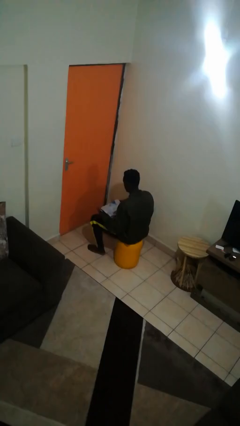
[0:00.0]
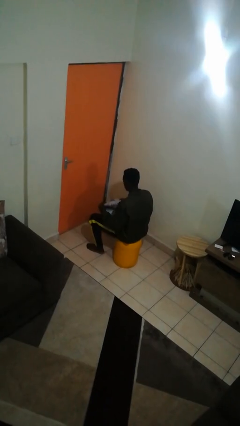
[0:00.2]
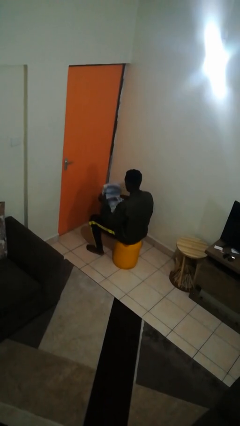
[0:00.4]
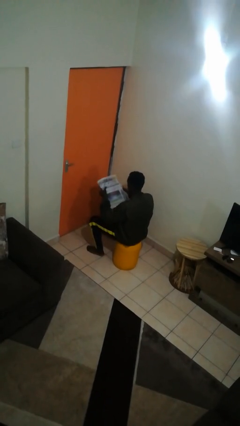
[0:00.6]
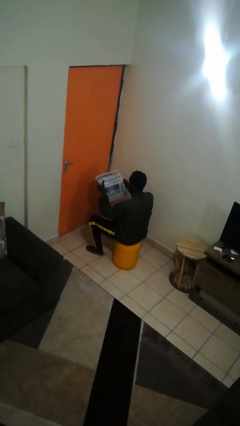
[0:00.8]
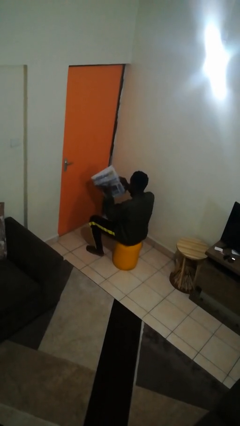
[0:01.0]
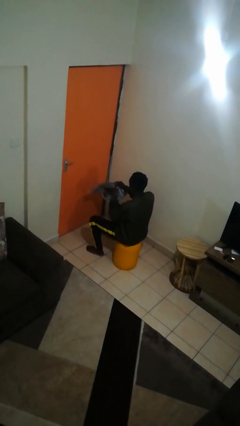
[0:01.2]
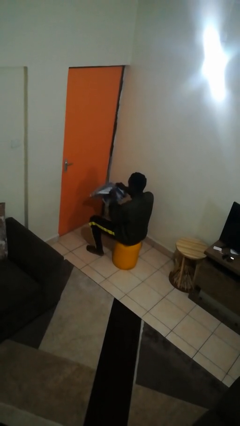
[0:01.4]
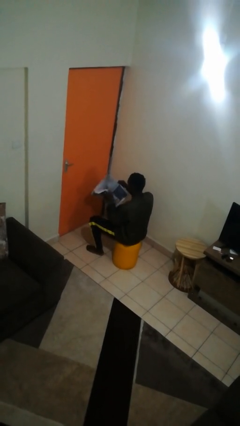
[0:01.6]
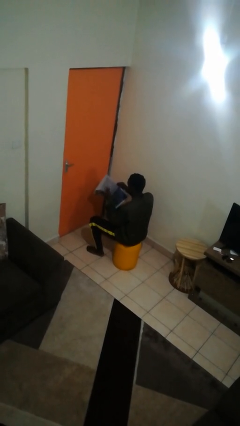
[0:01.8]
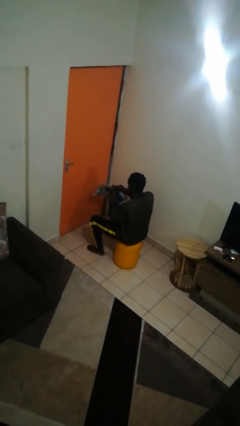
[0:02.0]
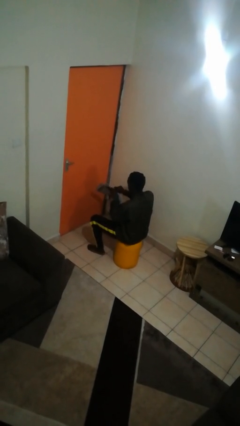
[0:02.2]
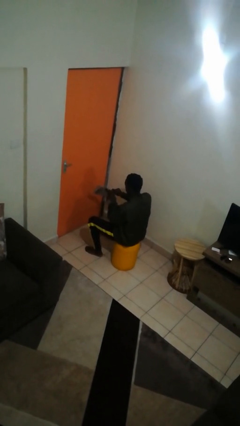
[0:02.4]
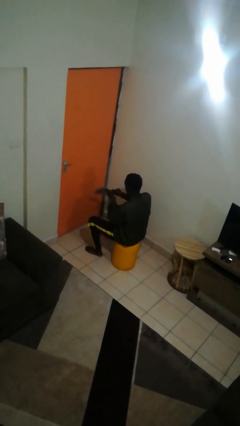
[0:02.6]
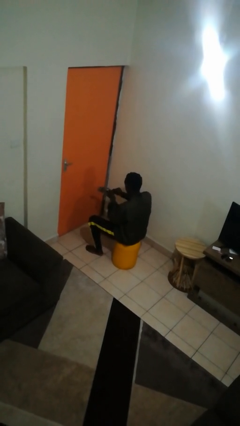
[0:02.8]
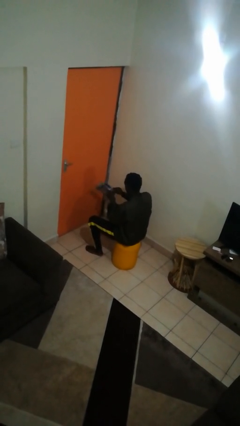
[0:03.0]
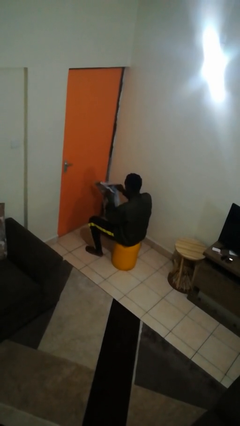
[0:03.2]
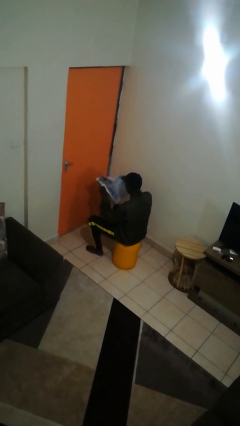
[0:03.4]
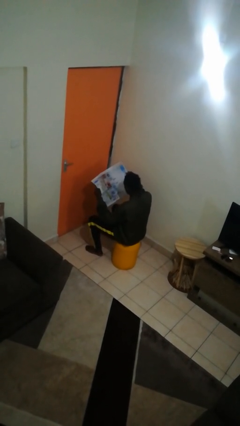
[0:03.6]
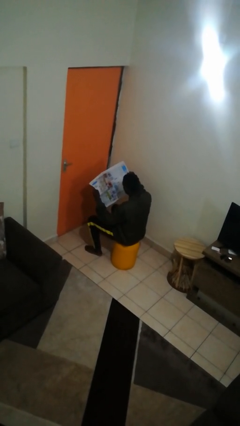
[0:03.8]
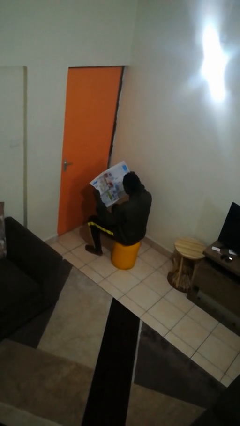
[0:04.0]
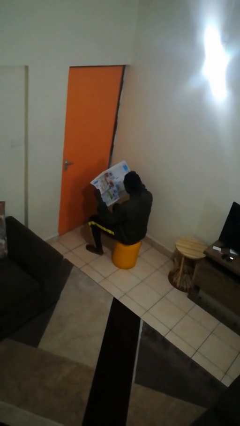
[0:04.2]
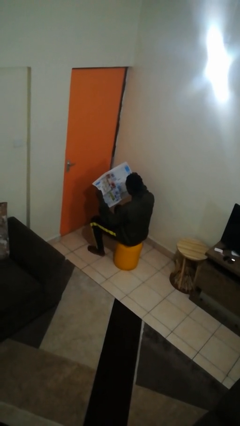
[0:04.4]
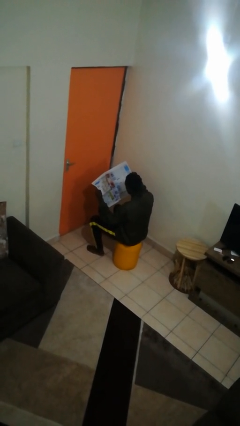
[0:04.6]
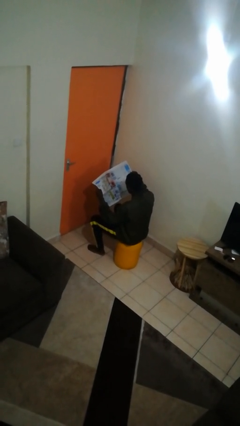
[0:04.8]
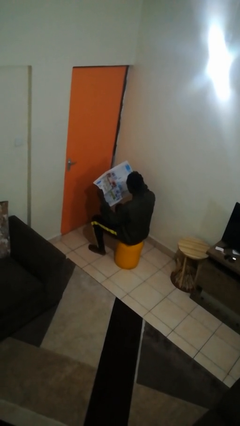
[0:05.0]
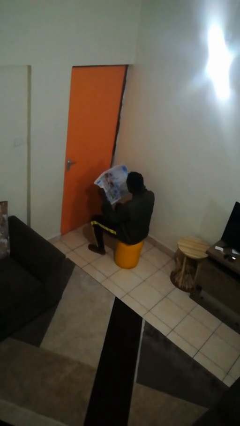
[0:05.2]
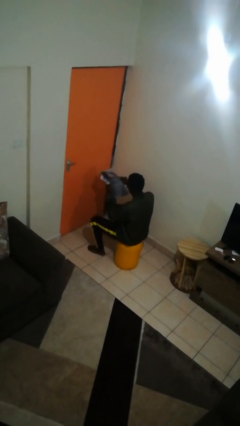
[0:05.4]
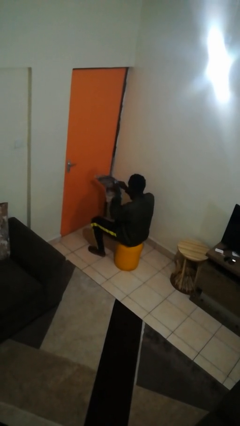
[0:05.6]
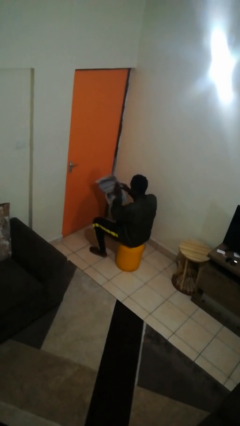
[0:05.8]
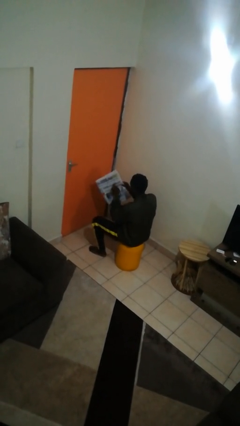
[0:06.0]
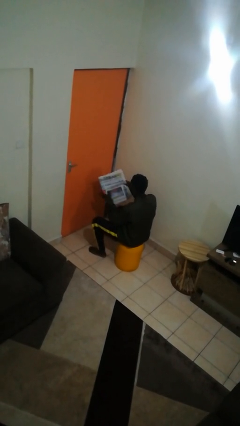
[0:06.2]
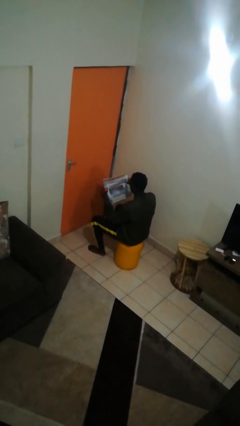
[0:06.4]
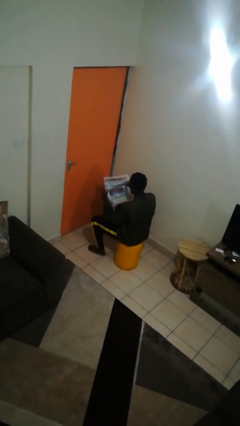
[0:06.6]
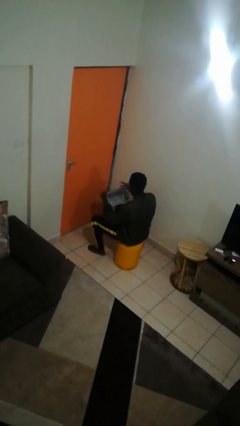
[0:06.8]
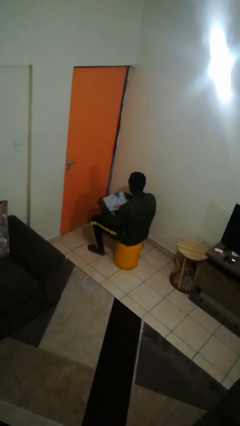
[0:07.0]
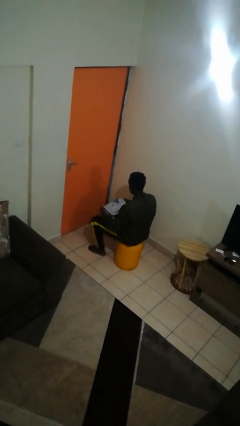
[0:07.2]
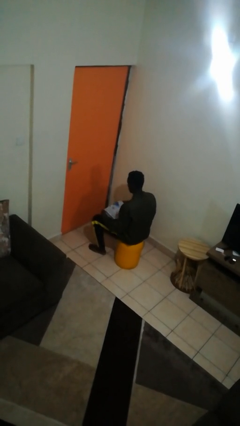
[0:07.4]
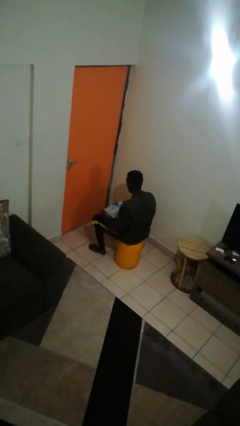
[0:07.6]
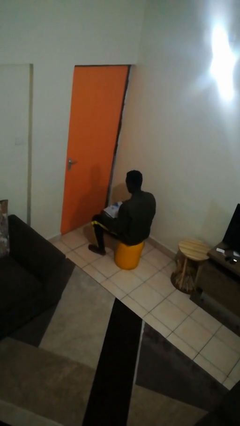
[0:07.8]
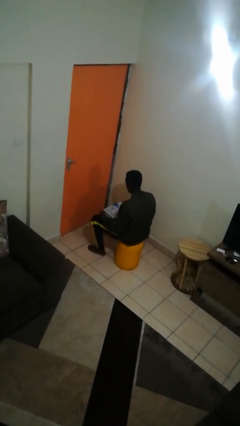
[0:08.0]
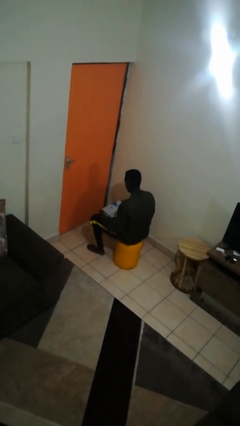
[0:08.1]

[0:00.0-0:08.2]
person reads newspaper

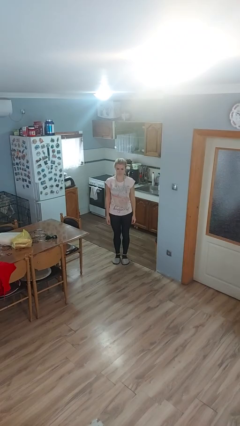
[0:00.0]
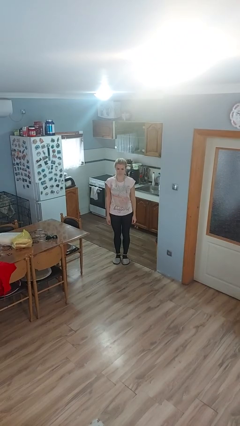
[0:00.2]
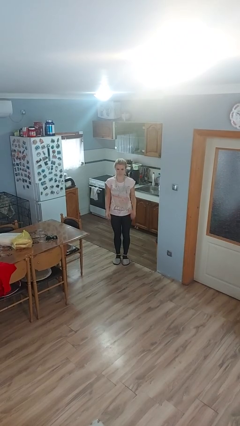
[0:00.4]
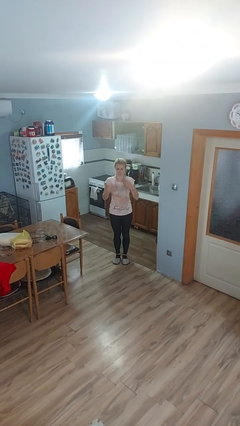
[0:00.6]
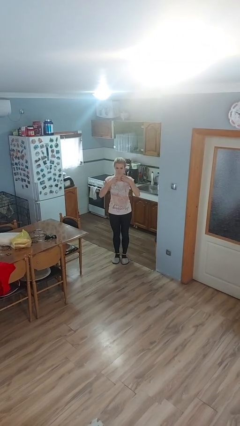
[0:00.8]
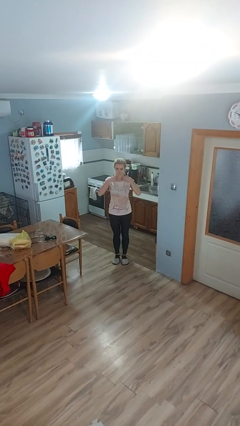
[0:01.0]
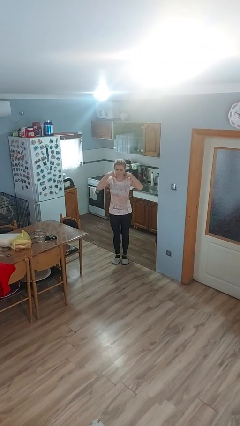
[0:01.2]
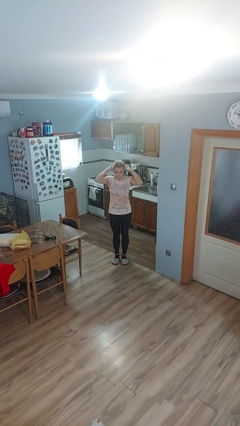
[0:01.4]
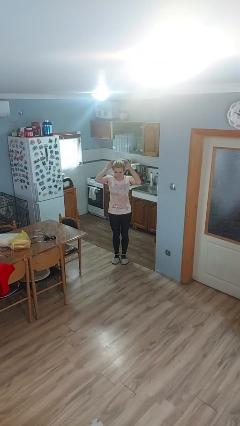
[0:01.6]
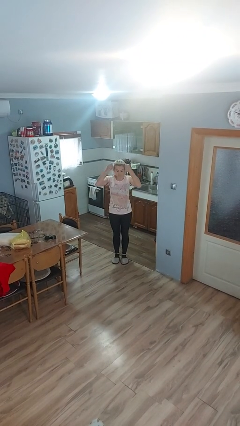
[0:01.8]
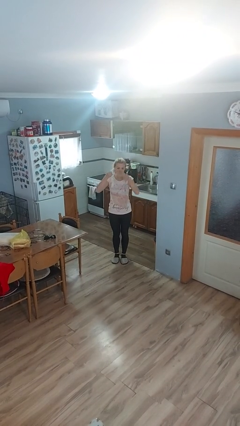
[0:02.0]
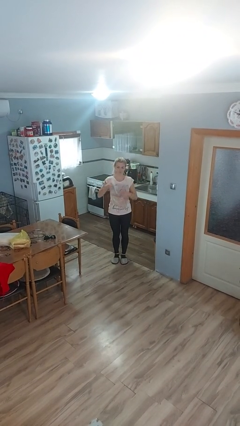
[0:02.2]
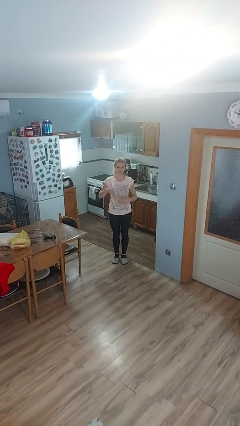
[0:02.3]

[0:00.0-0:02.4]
person takes off necklace

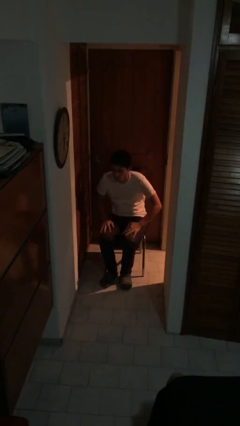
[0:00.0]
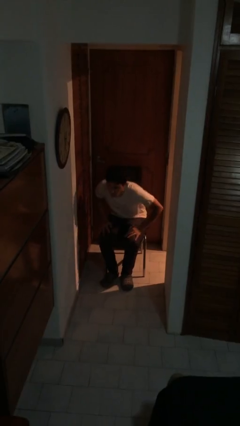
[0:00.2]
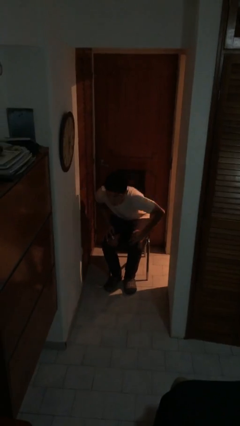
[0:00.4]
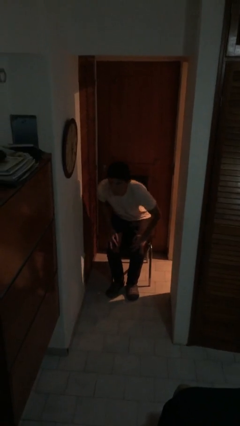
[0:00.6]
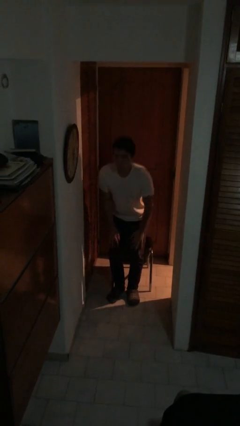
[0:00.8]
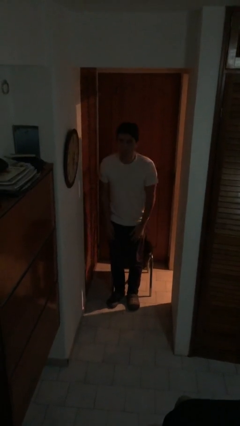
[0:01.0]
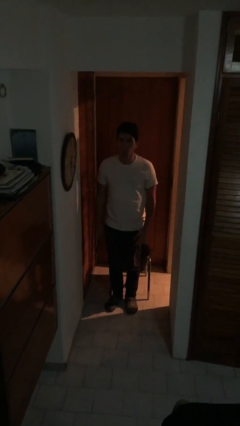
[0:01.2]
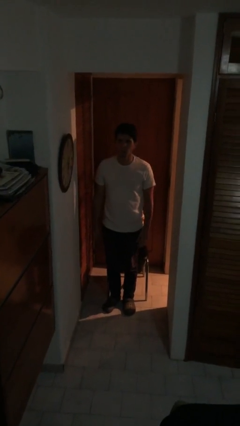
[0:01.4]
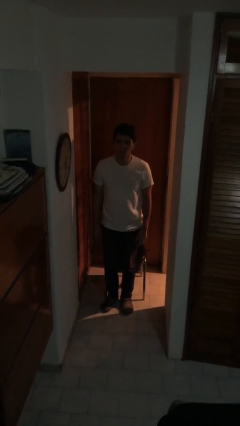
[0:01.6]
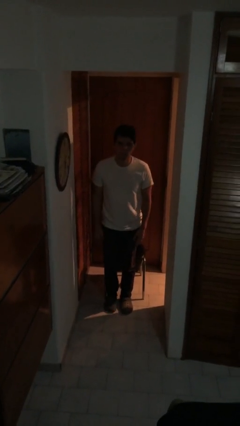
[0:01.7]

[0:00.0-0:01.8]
person stands up

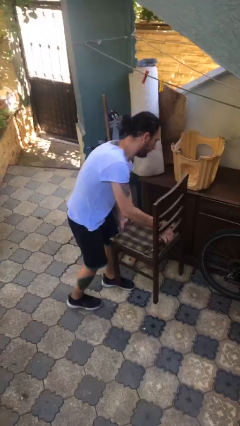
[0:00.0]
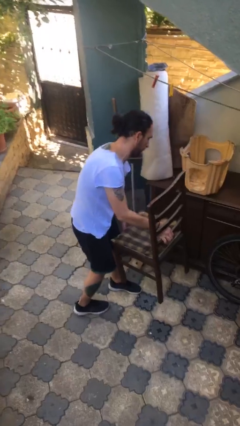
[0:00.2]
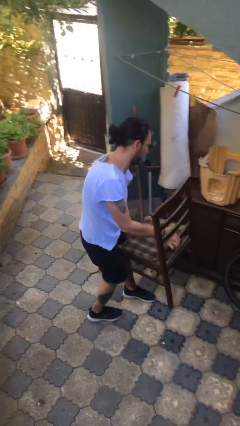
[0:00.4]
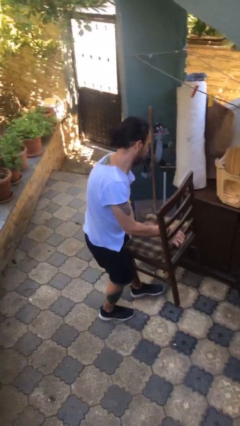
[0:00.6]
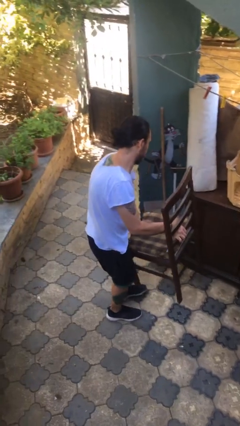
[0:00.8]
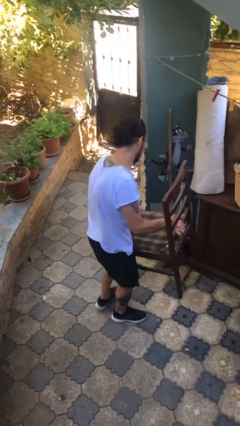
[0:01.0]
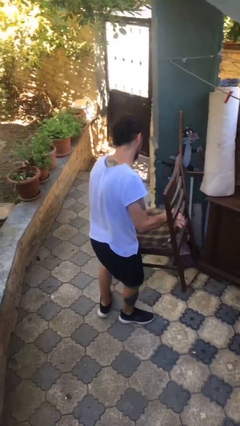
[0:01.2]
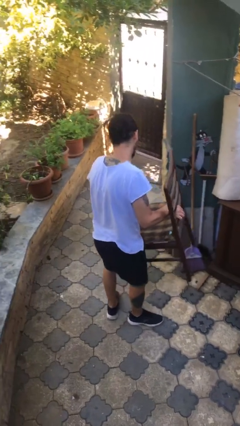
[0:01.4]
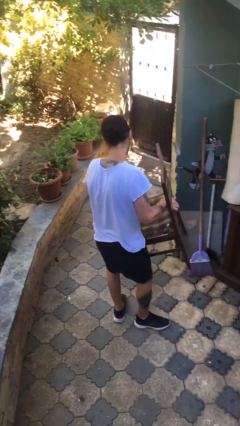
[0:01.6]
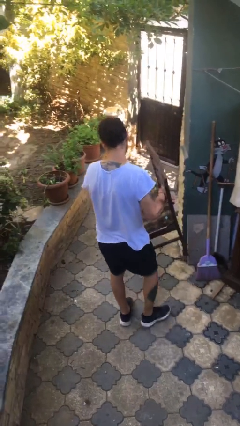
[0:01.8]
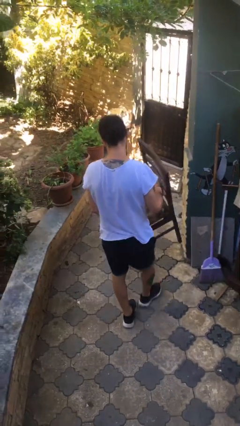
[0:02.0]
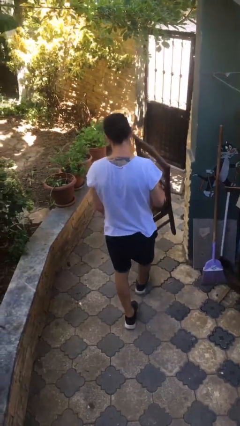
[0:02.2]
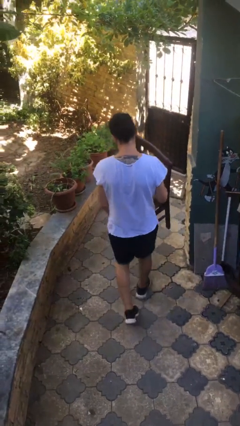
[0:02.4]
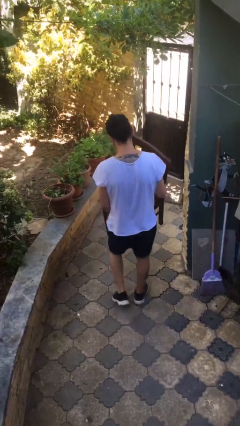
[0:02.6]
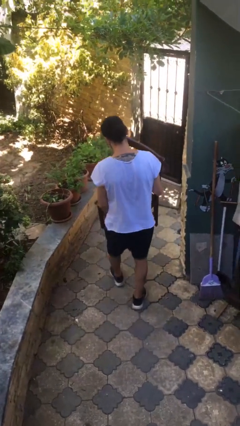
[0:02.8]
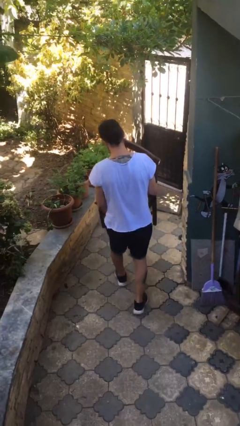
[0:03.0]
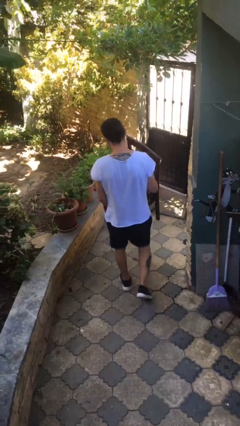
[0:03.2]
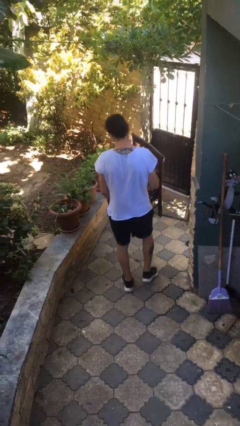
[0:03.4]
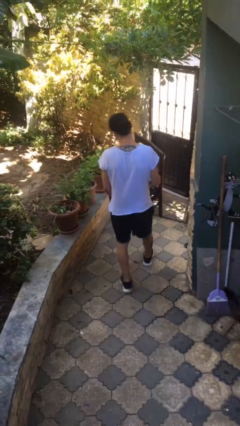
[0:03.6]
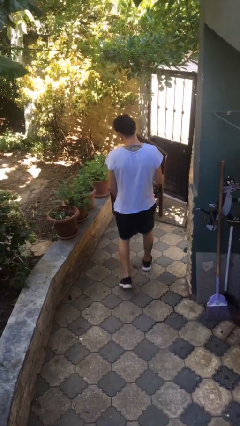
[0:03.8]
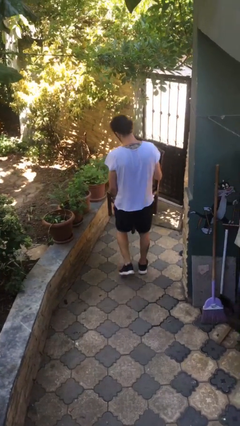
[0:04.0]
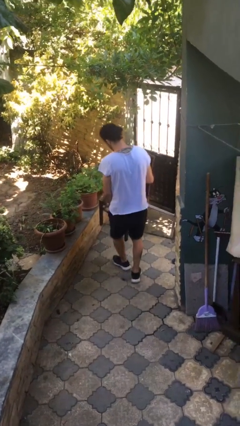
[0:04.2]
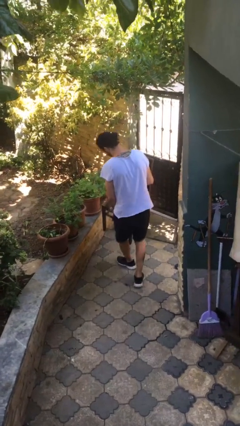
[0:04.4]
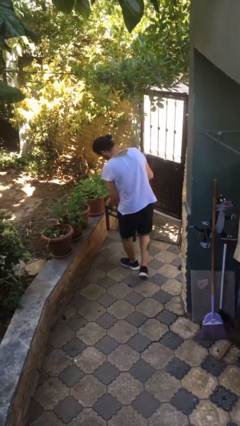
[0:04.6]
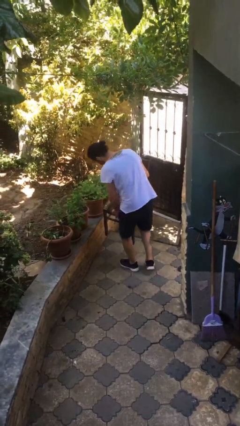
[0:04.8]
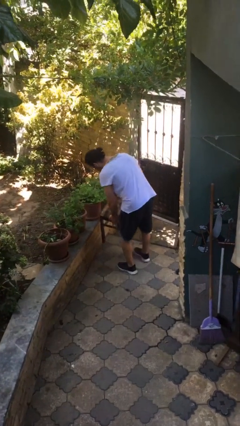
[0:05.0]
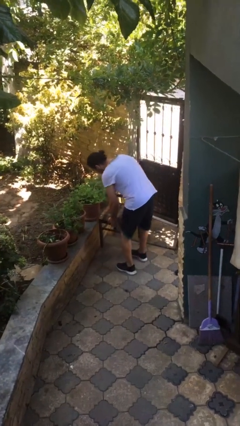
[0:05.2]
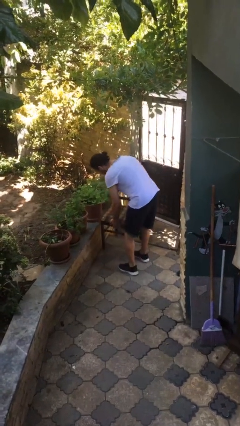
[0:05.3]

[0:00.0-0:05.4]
person carries heavy object
